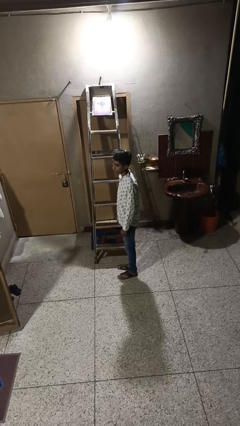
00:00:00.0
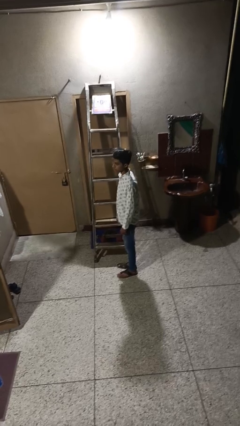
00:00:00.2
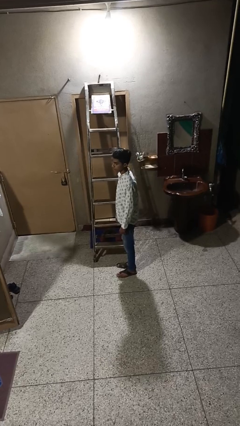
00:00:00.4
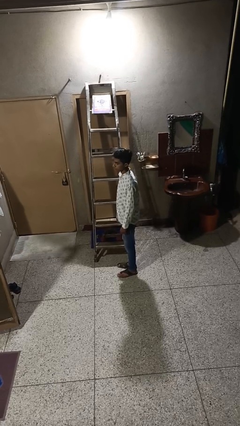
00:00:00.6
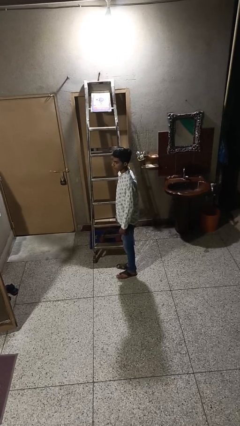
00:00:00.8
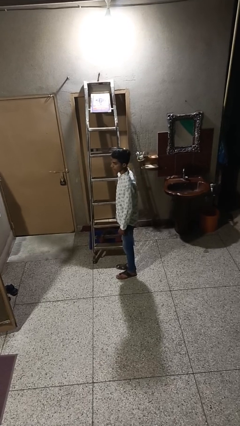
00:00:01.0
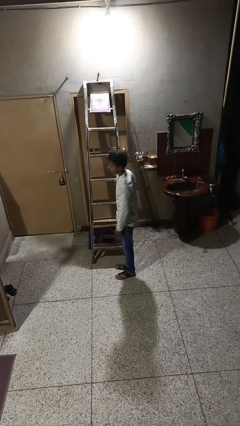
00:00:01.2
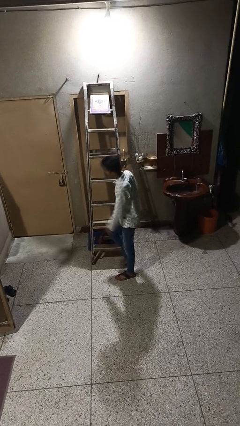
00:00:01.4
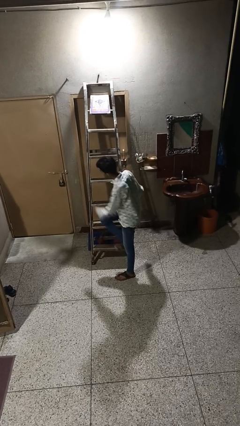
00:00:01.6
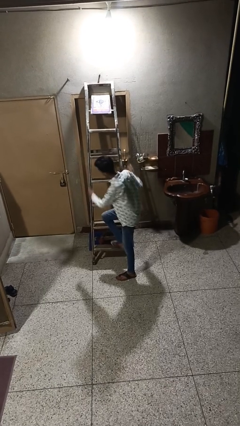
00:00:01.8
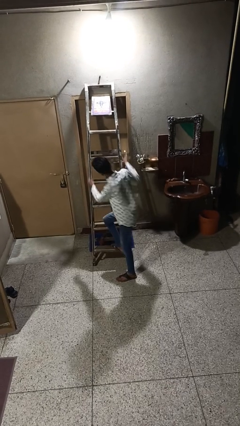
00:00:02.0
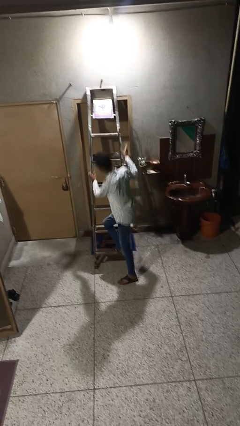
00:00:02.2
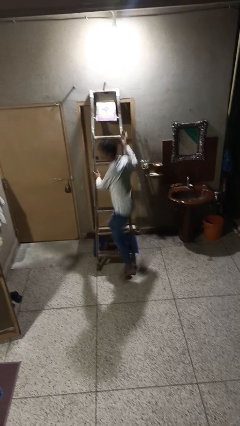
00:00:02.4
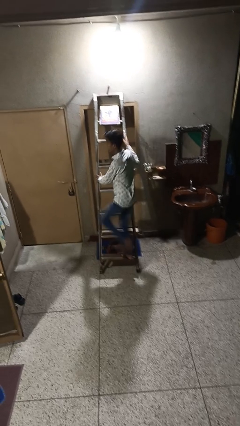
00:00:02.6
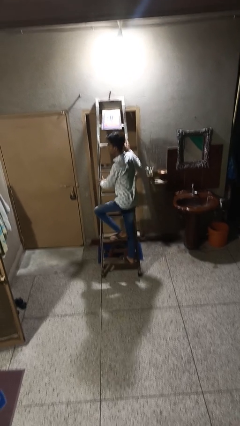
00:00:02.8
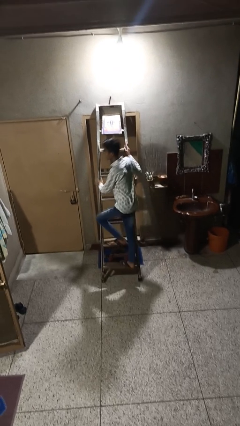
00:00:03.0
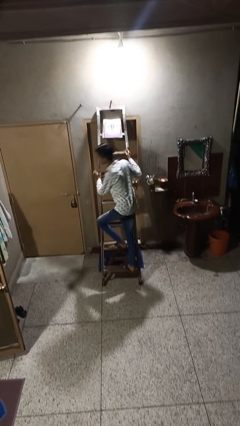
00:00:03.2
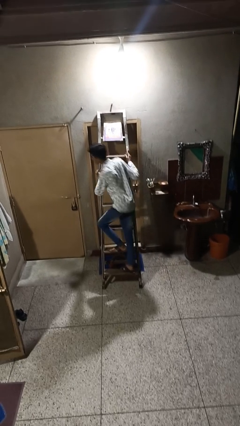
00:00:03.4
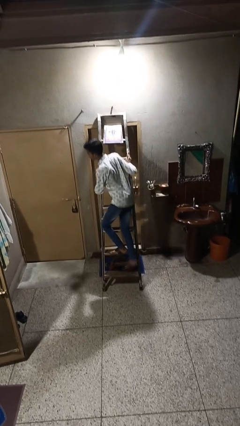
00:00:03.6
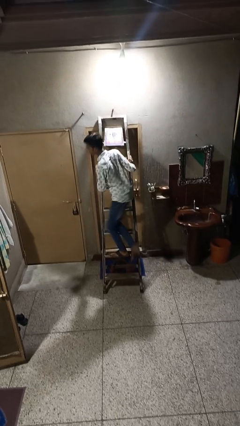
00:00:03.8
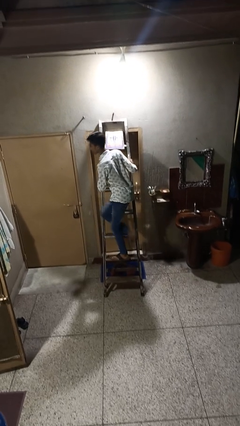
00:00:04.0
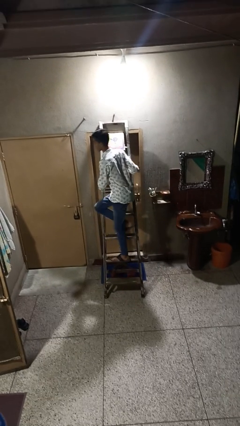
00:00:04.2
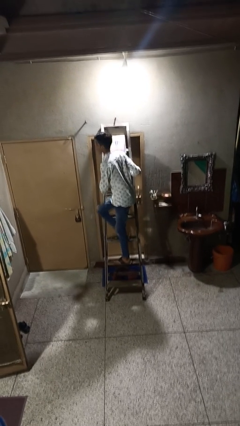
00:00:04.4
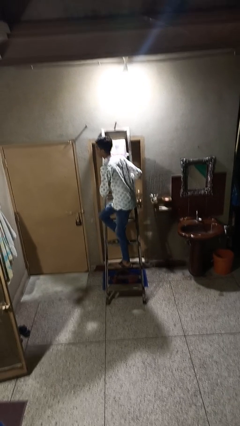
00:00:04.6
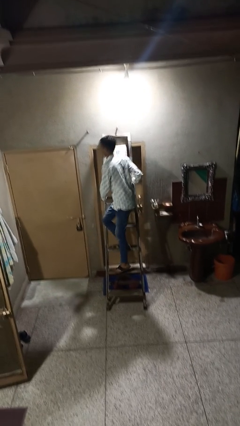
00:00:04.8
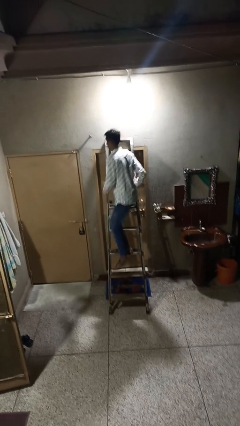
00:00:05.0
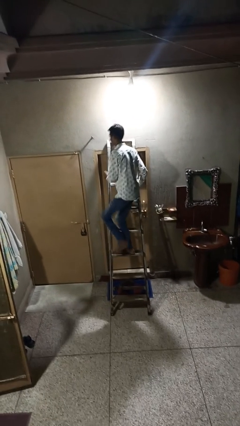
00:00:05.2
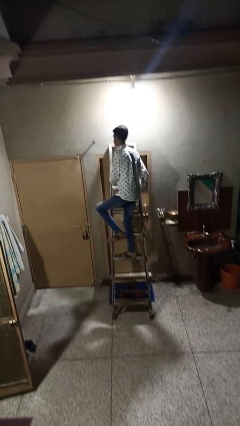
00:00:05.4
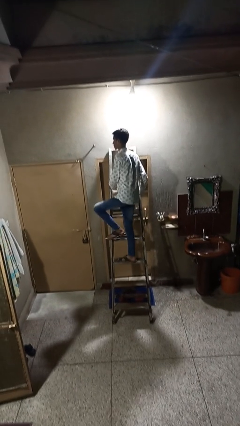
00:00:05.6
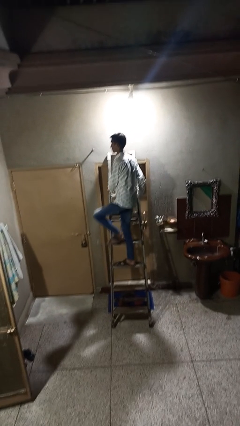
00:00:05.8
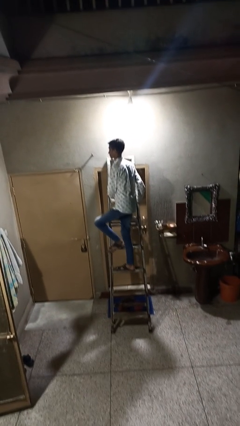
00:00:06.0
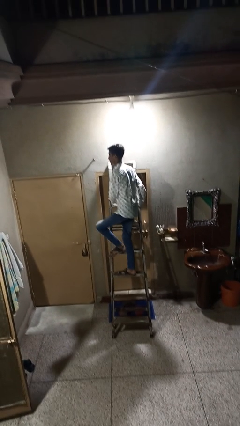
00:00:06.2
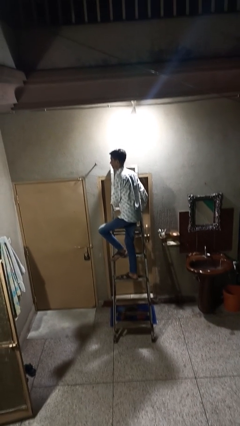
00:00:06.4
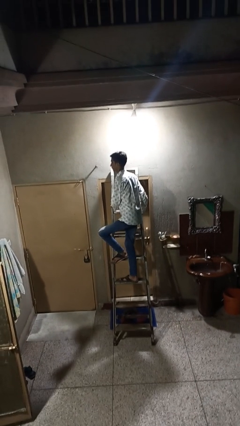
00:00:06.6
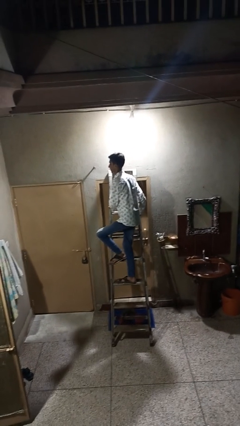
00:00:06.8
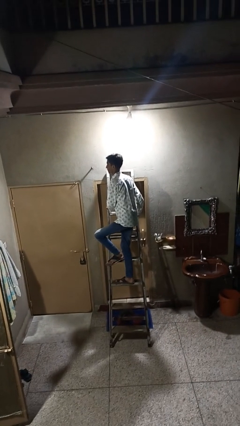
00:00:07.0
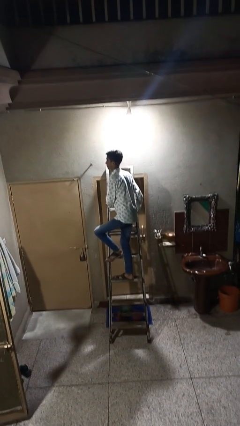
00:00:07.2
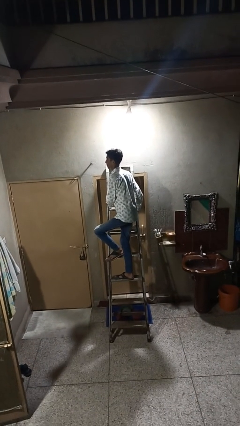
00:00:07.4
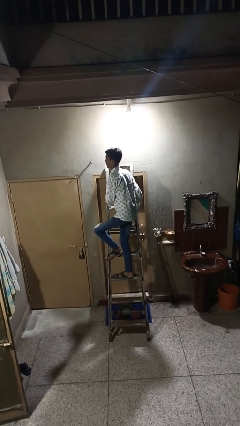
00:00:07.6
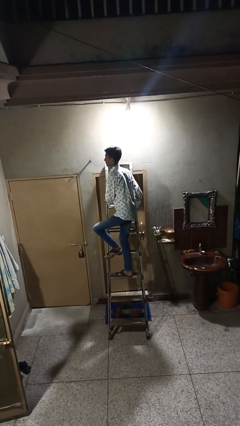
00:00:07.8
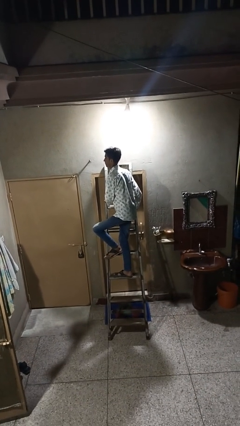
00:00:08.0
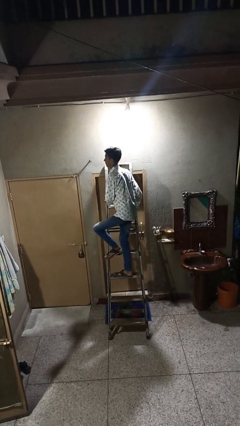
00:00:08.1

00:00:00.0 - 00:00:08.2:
person climbs up ladder

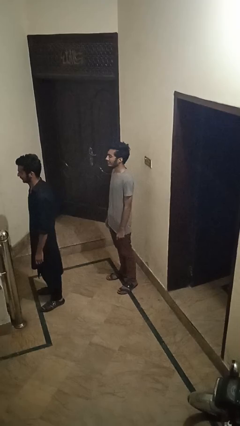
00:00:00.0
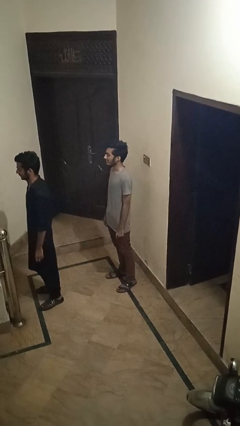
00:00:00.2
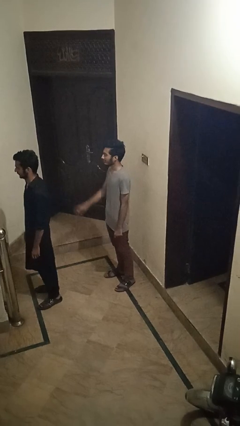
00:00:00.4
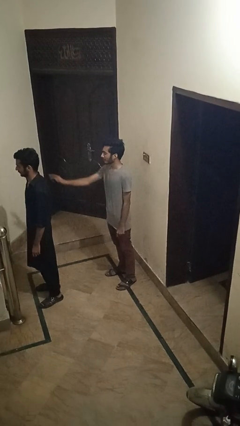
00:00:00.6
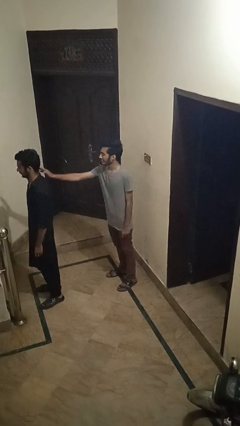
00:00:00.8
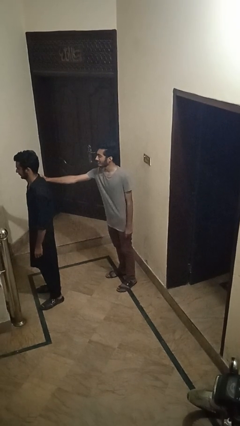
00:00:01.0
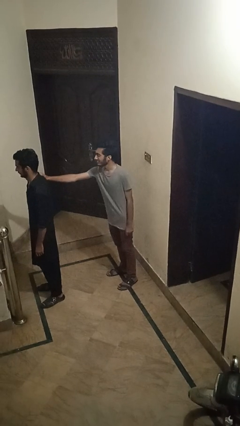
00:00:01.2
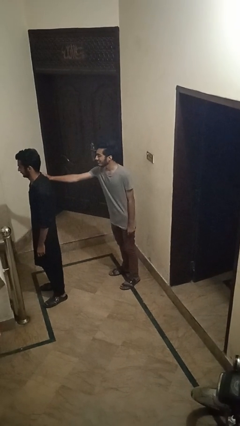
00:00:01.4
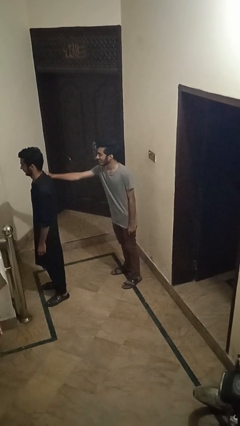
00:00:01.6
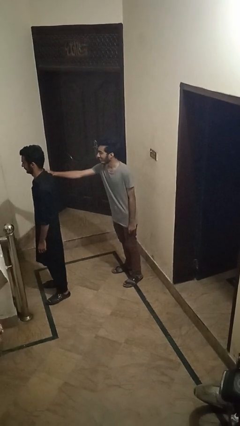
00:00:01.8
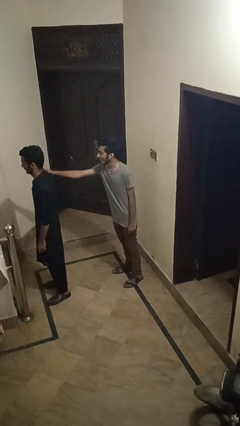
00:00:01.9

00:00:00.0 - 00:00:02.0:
person grabs person by shoulder

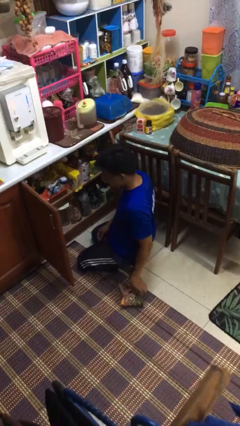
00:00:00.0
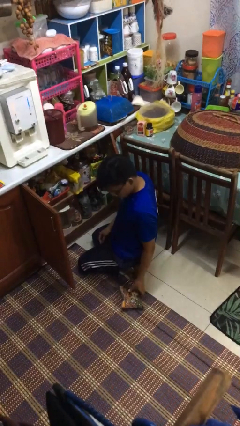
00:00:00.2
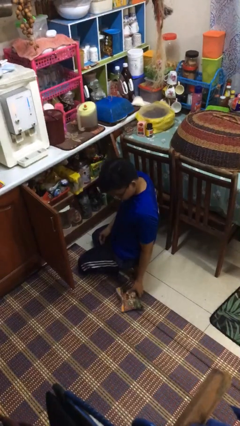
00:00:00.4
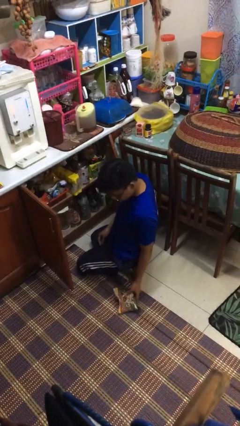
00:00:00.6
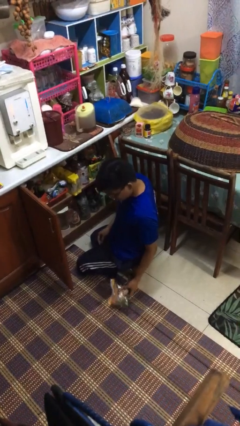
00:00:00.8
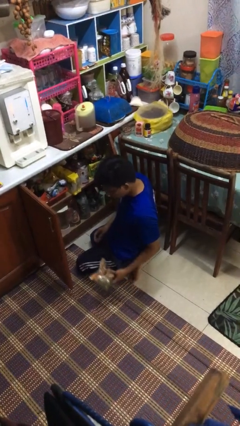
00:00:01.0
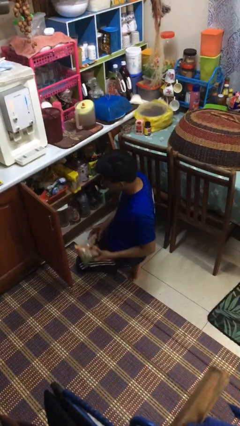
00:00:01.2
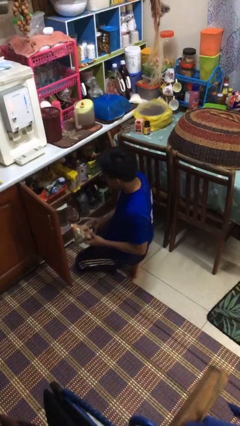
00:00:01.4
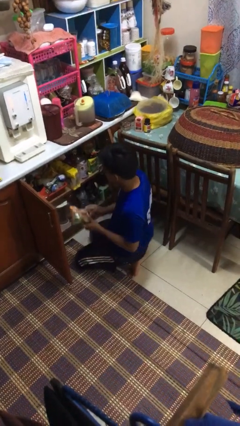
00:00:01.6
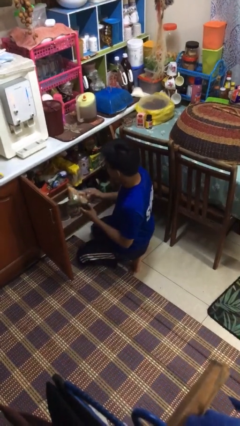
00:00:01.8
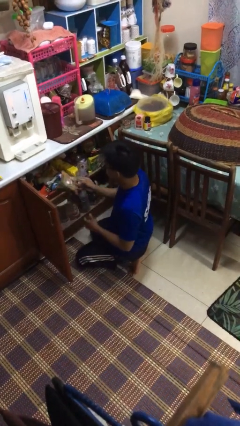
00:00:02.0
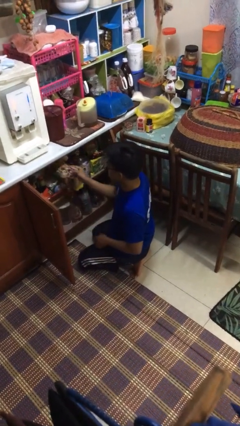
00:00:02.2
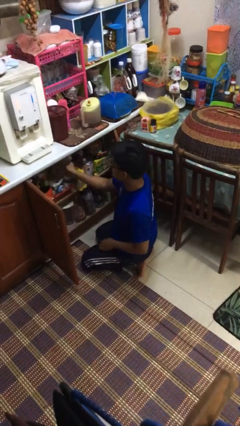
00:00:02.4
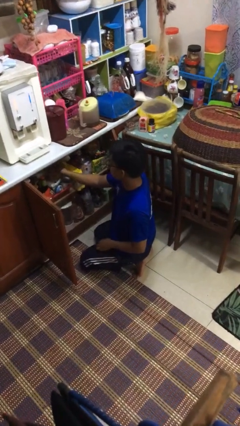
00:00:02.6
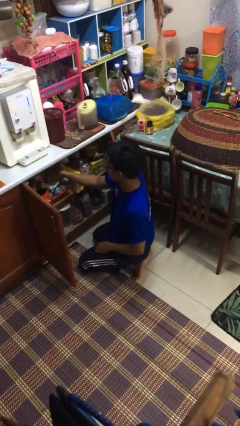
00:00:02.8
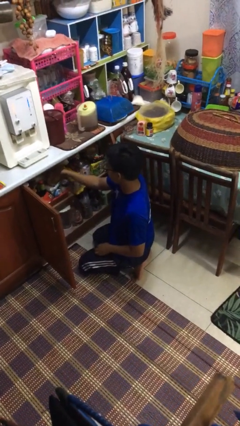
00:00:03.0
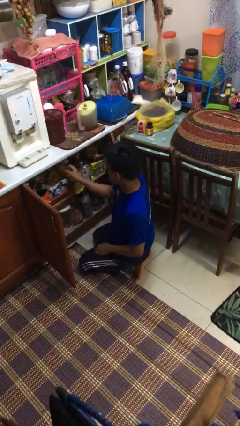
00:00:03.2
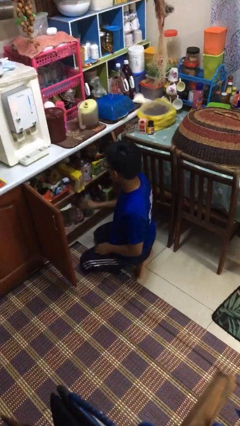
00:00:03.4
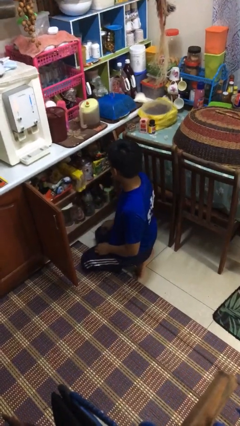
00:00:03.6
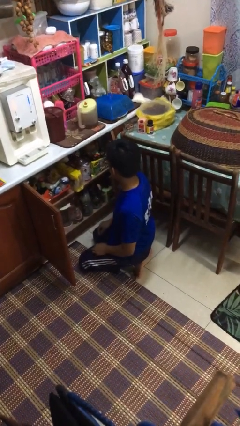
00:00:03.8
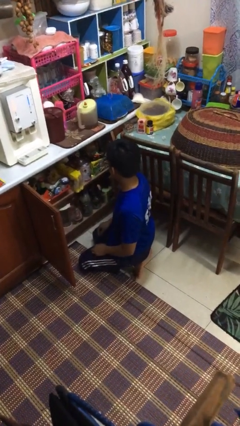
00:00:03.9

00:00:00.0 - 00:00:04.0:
person puts object in cabinet

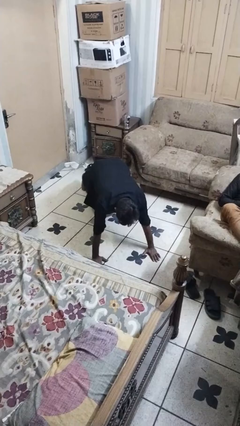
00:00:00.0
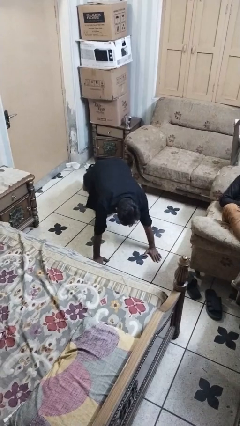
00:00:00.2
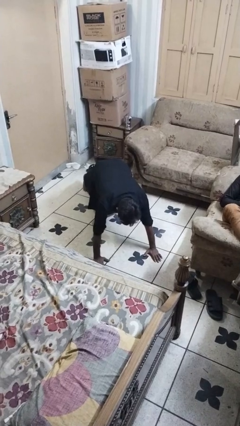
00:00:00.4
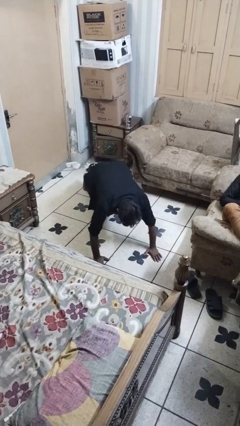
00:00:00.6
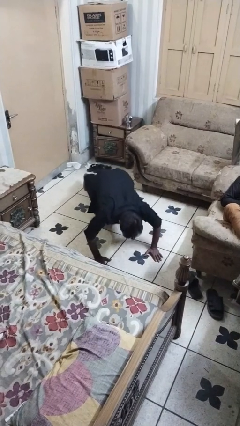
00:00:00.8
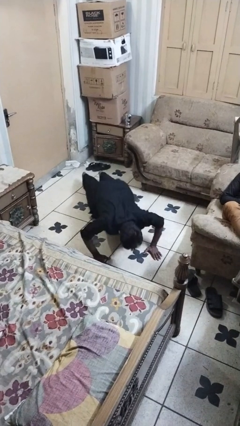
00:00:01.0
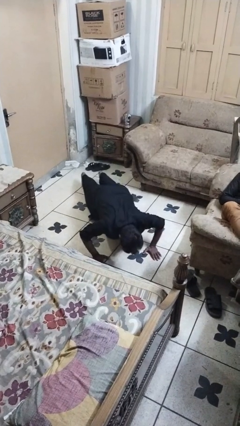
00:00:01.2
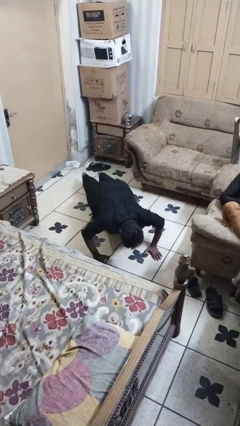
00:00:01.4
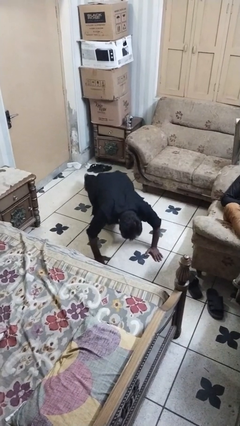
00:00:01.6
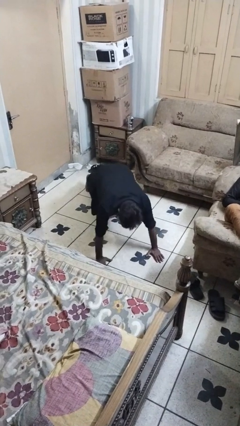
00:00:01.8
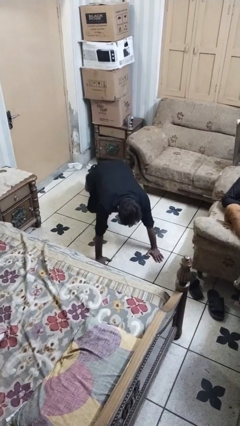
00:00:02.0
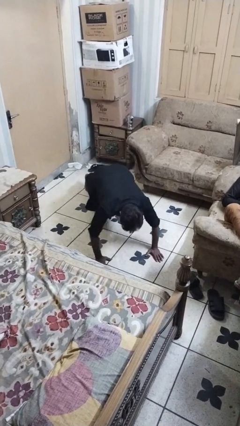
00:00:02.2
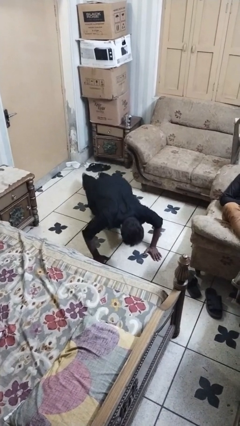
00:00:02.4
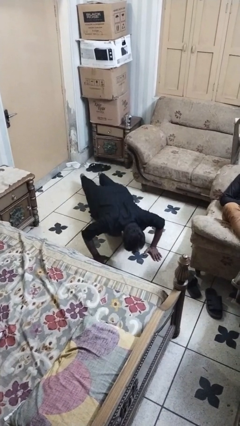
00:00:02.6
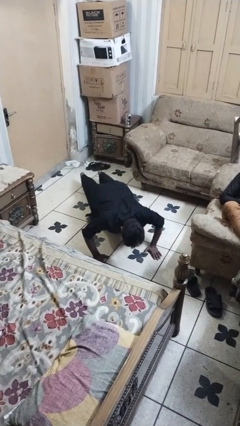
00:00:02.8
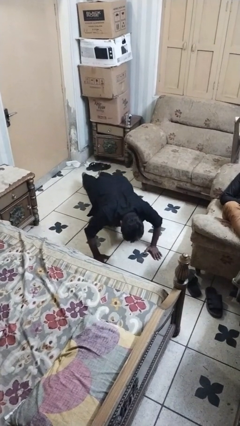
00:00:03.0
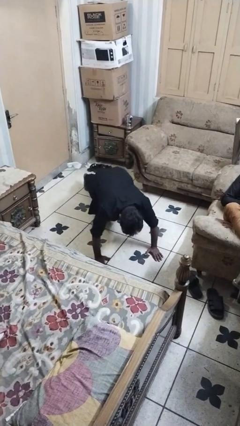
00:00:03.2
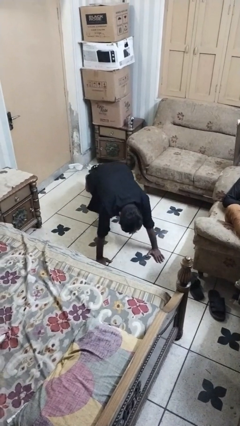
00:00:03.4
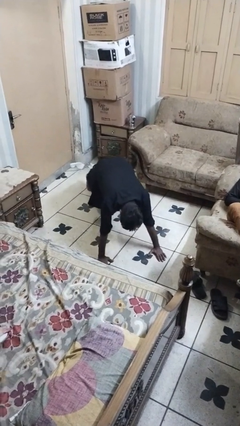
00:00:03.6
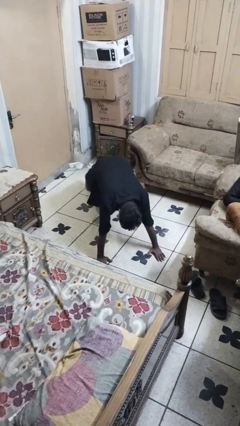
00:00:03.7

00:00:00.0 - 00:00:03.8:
person exercises with pushup
